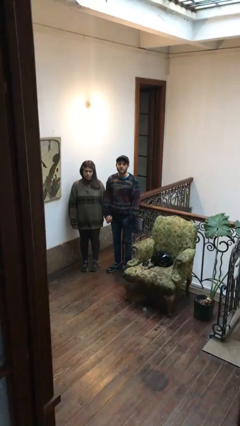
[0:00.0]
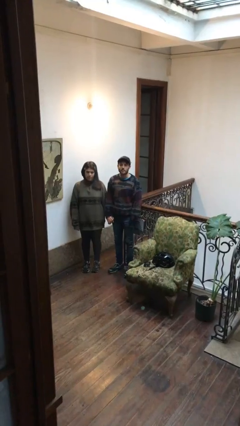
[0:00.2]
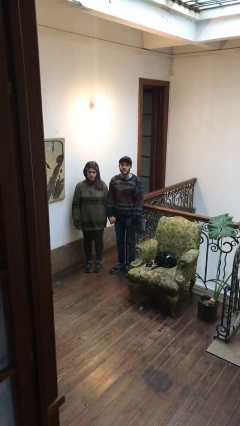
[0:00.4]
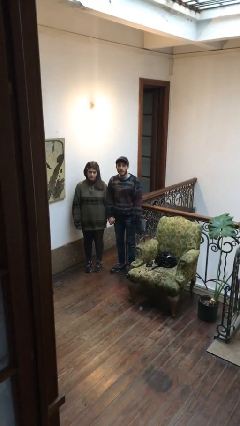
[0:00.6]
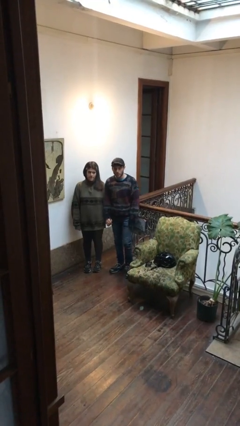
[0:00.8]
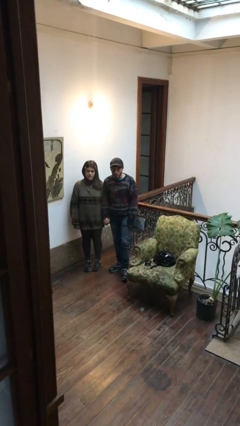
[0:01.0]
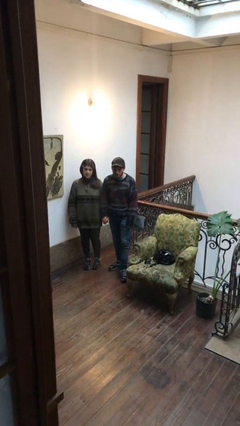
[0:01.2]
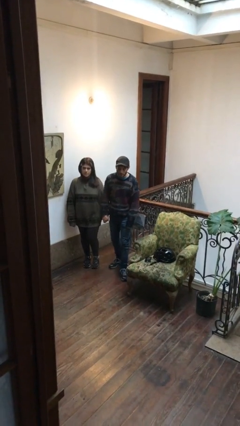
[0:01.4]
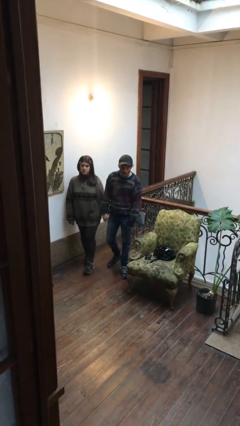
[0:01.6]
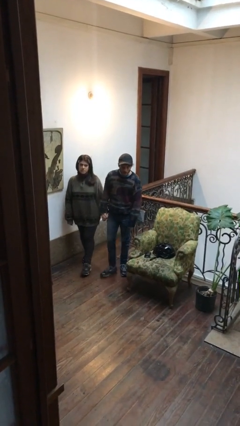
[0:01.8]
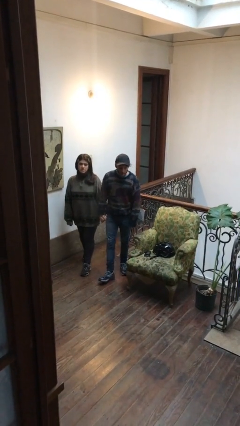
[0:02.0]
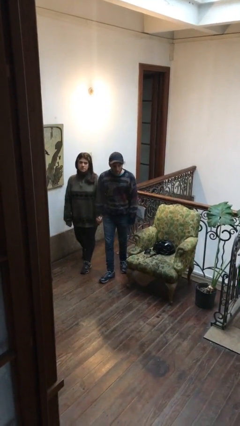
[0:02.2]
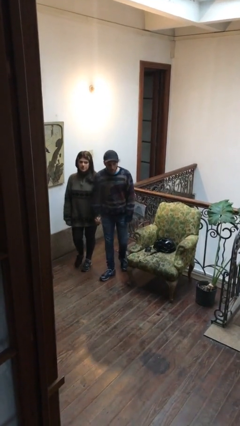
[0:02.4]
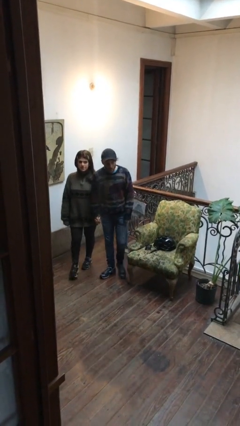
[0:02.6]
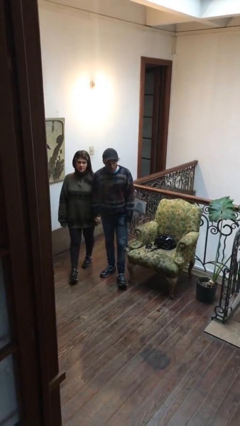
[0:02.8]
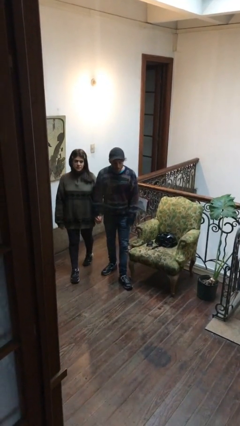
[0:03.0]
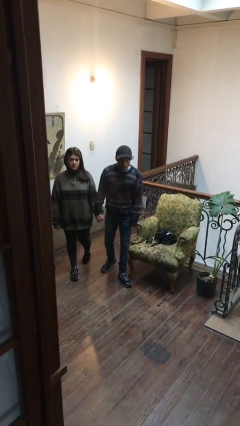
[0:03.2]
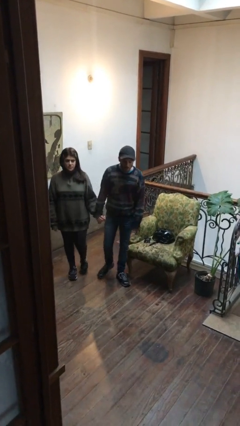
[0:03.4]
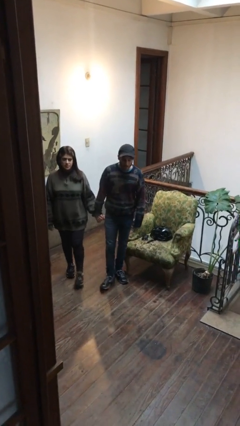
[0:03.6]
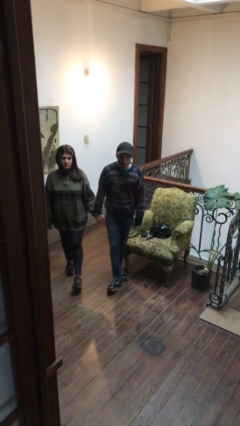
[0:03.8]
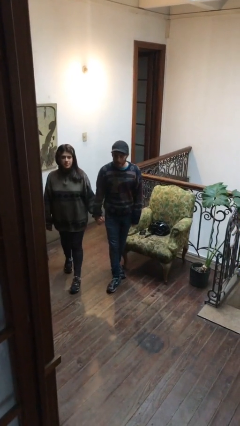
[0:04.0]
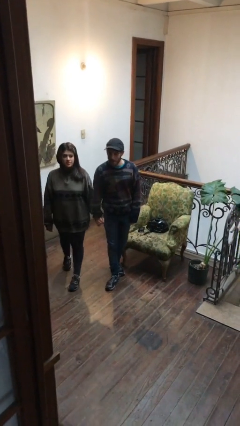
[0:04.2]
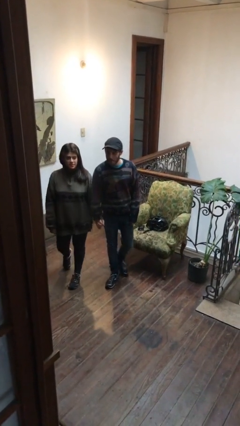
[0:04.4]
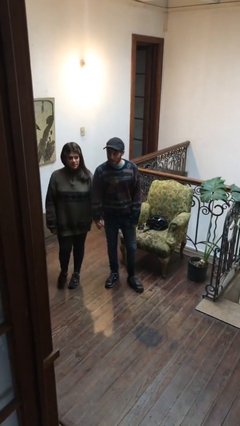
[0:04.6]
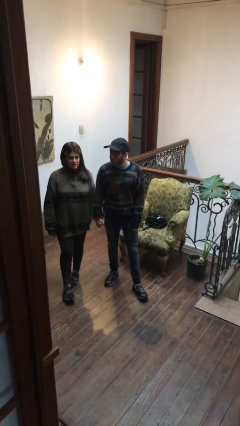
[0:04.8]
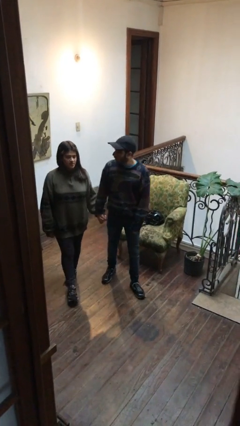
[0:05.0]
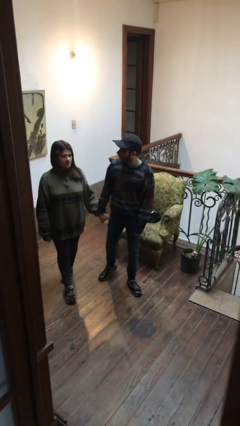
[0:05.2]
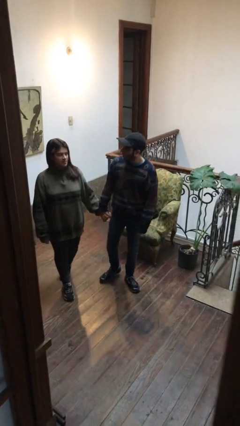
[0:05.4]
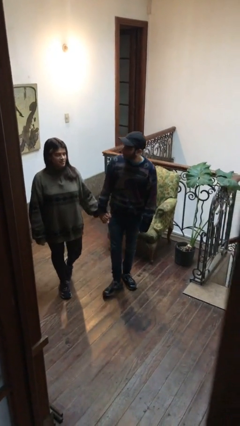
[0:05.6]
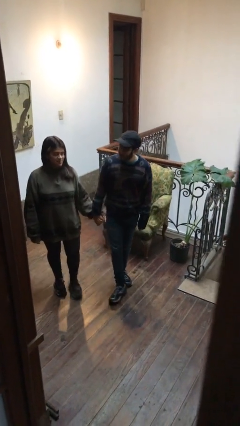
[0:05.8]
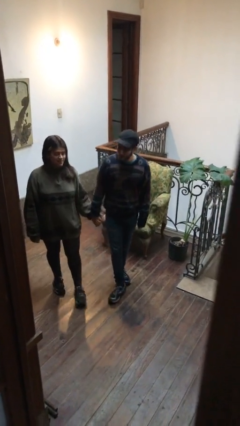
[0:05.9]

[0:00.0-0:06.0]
person holds hand

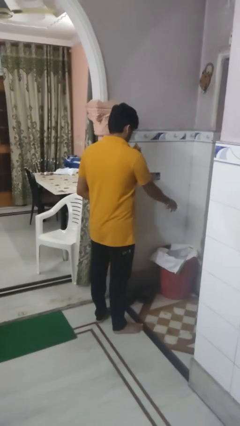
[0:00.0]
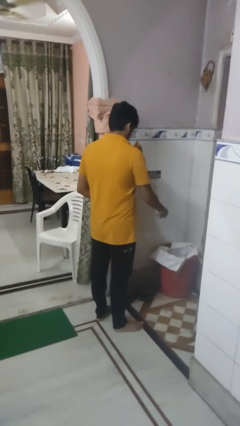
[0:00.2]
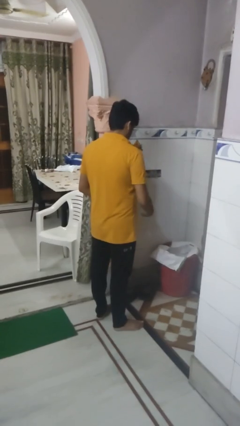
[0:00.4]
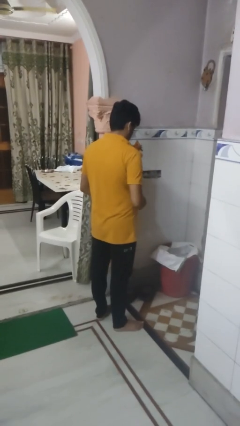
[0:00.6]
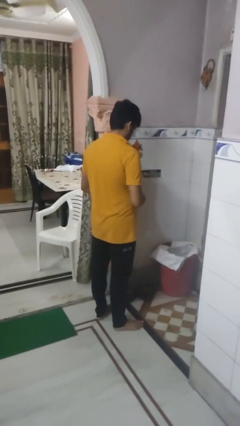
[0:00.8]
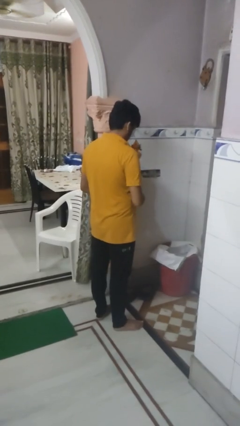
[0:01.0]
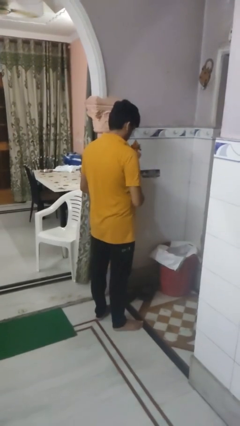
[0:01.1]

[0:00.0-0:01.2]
person discards trash

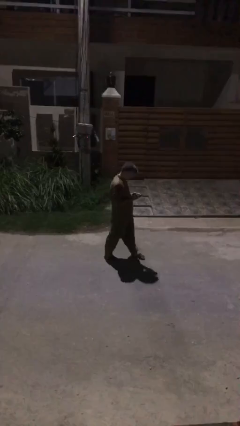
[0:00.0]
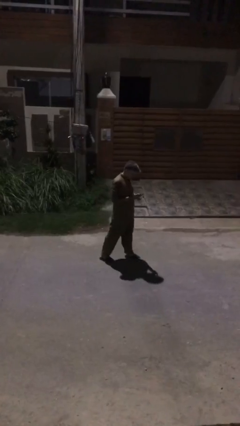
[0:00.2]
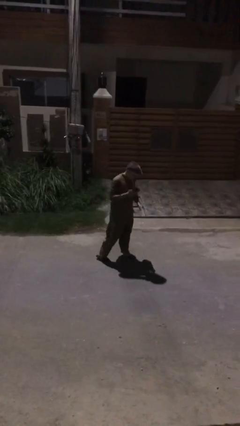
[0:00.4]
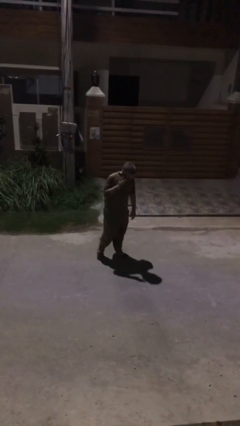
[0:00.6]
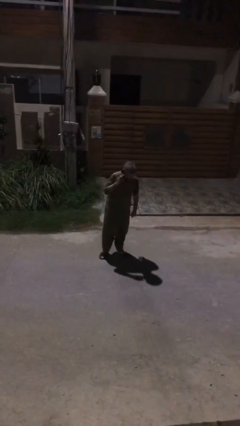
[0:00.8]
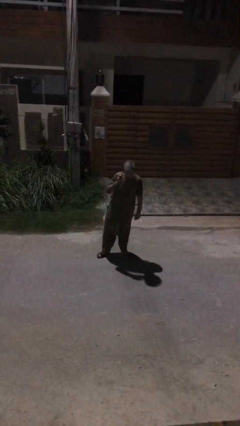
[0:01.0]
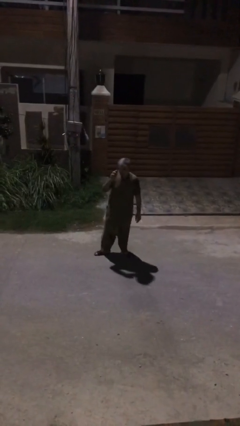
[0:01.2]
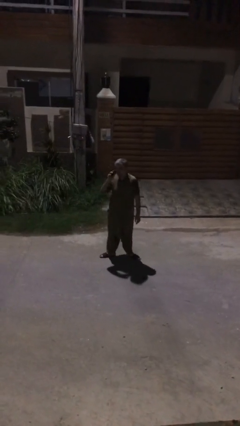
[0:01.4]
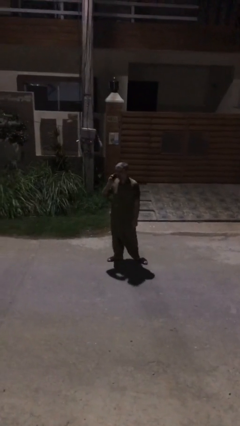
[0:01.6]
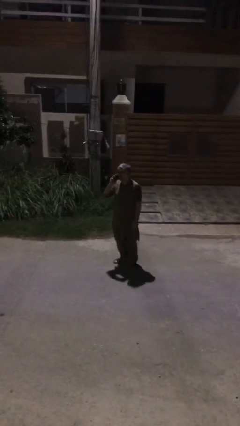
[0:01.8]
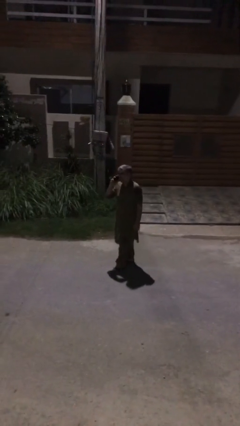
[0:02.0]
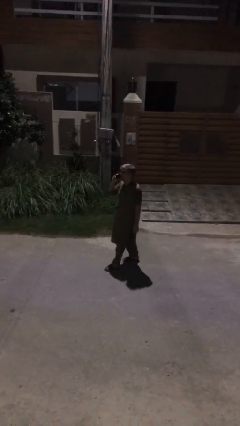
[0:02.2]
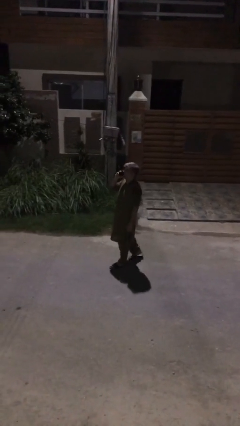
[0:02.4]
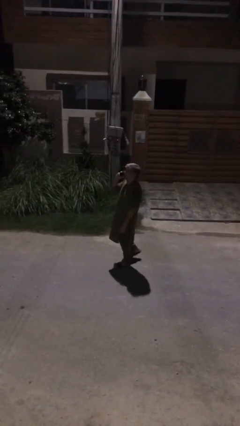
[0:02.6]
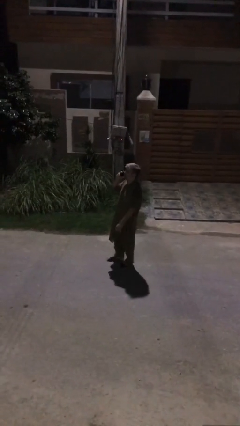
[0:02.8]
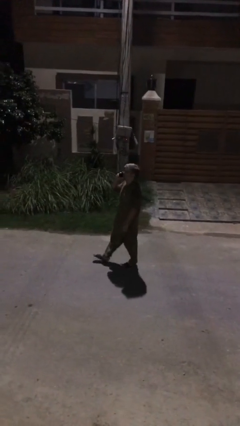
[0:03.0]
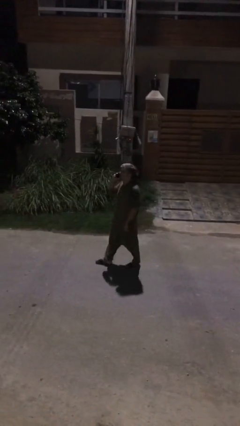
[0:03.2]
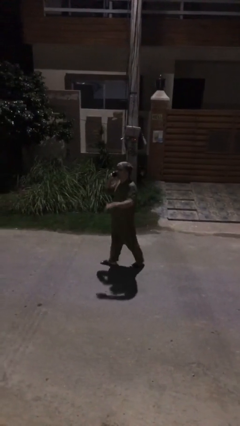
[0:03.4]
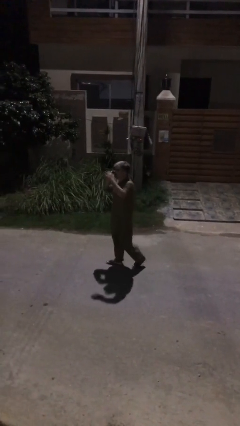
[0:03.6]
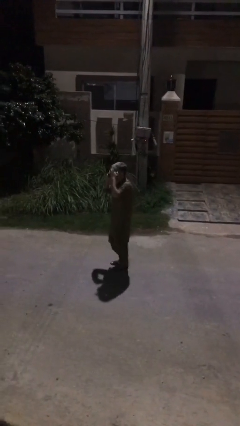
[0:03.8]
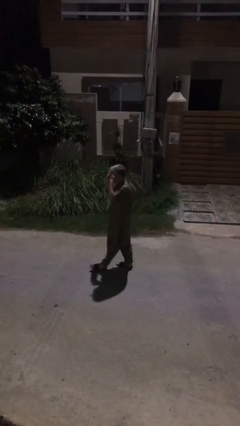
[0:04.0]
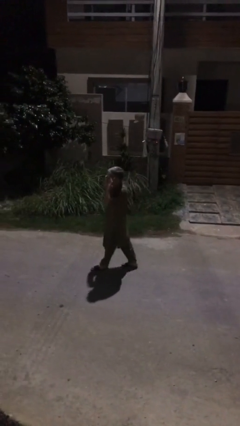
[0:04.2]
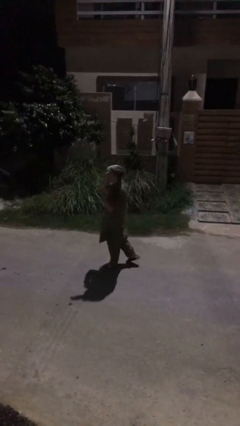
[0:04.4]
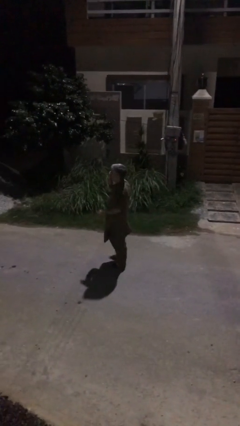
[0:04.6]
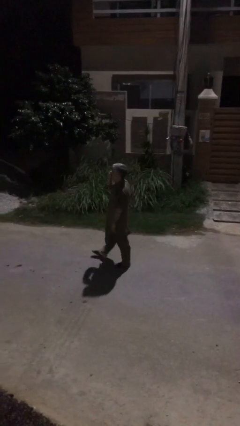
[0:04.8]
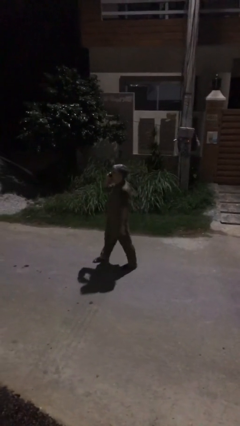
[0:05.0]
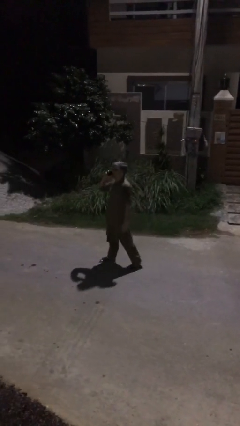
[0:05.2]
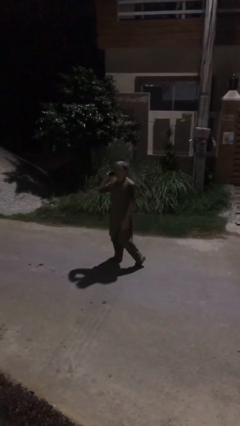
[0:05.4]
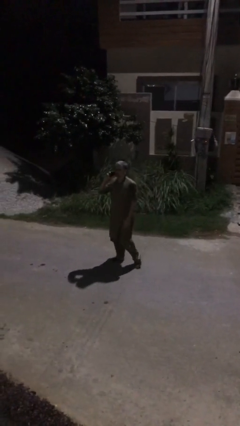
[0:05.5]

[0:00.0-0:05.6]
person talks on phone

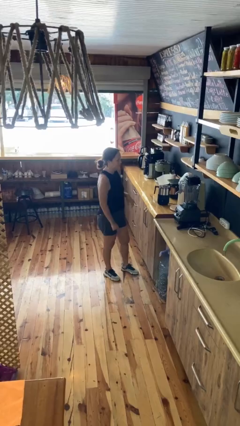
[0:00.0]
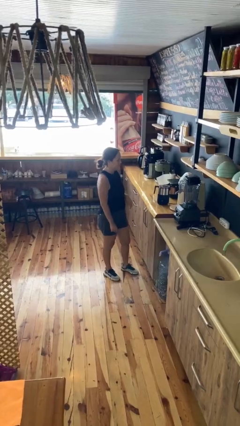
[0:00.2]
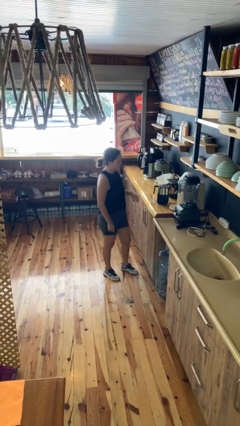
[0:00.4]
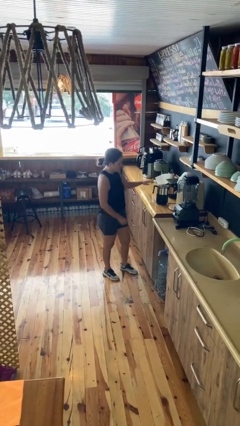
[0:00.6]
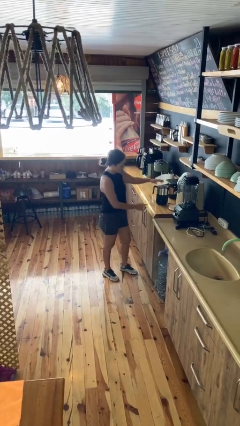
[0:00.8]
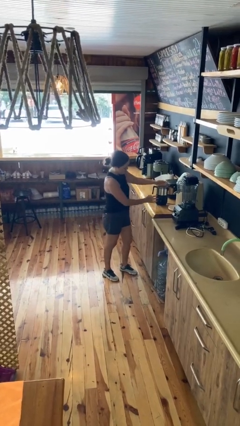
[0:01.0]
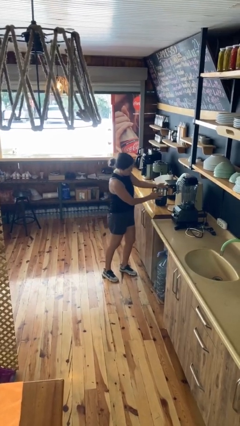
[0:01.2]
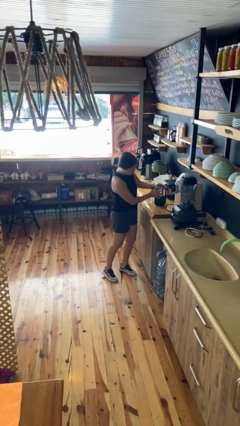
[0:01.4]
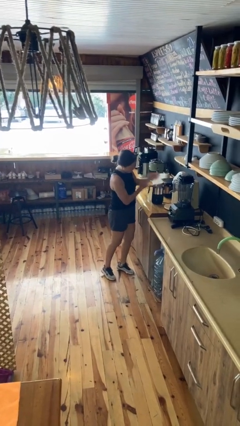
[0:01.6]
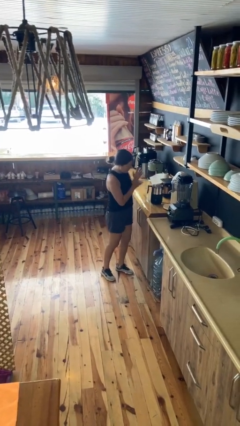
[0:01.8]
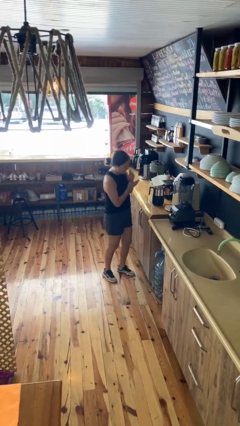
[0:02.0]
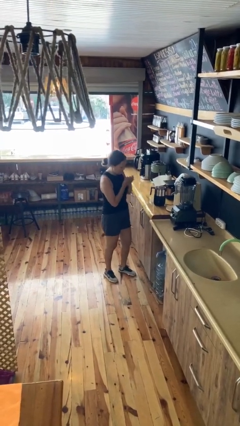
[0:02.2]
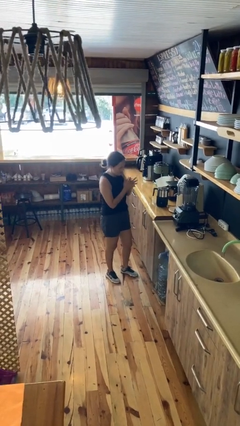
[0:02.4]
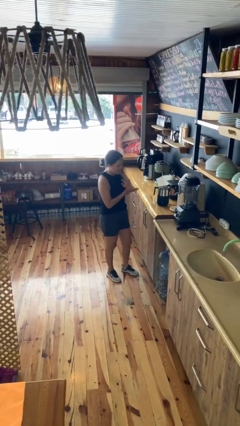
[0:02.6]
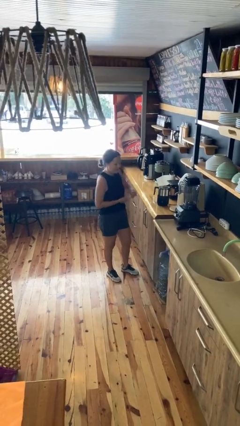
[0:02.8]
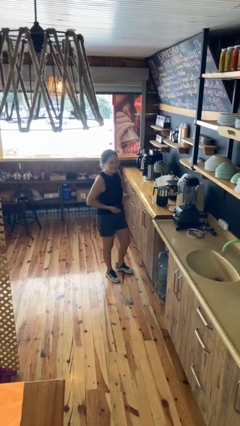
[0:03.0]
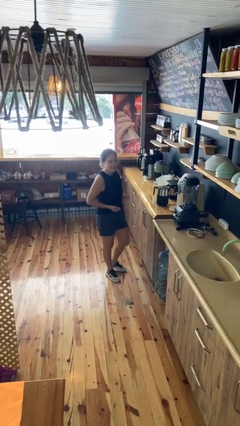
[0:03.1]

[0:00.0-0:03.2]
person burns hand

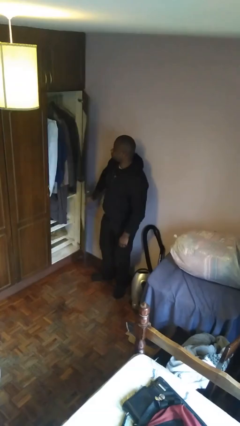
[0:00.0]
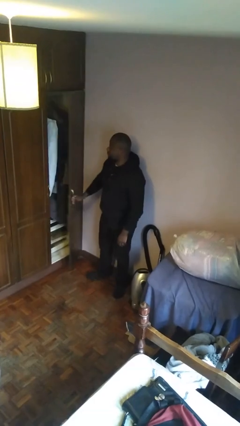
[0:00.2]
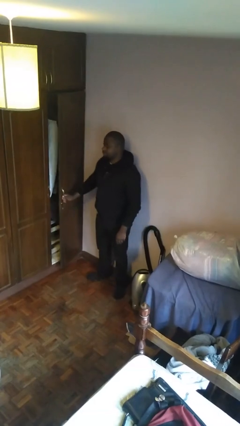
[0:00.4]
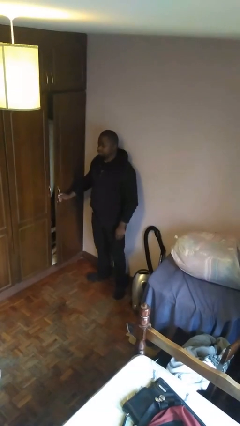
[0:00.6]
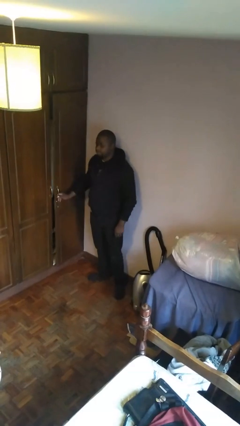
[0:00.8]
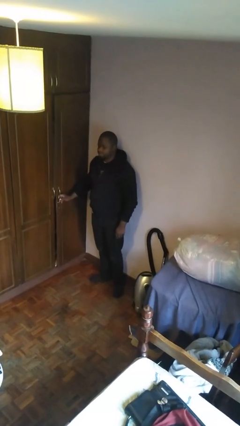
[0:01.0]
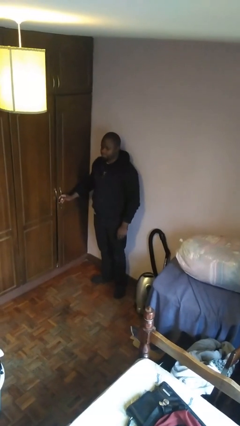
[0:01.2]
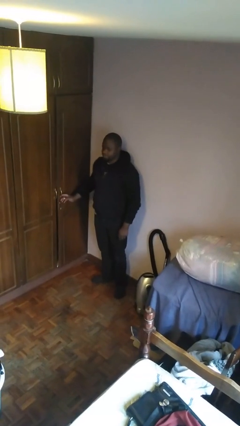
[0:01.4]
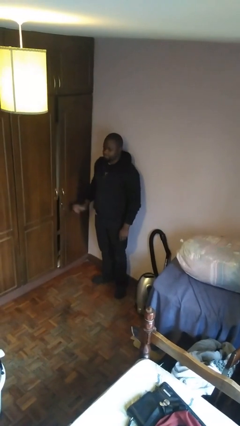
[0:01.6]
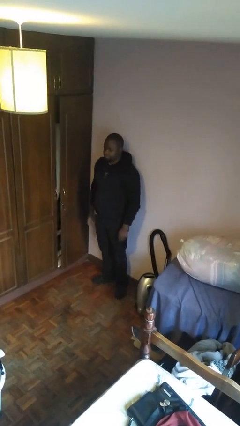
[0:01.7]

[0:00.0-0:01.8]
person closes closet door
